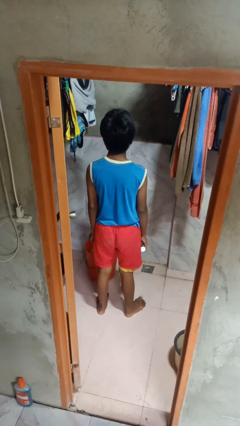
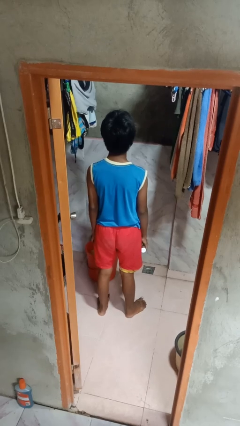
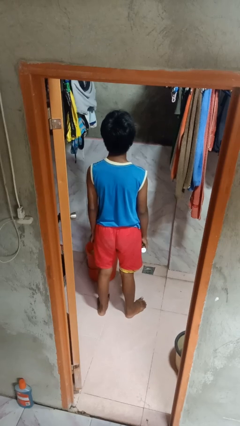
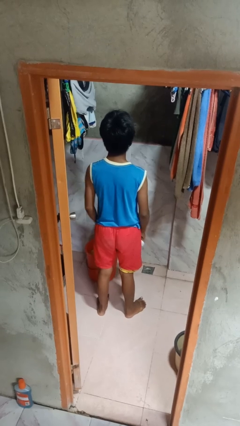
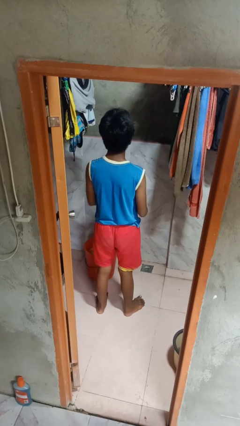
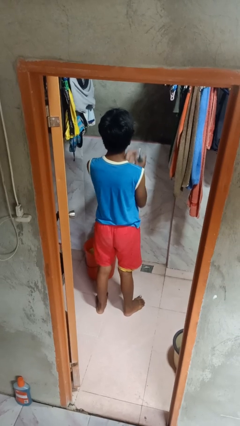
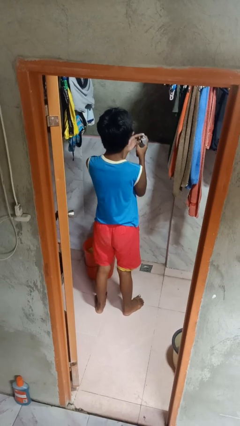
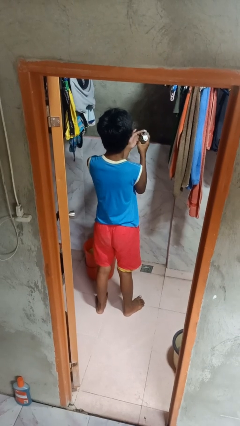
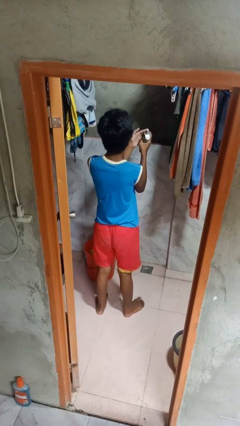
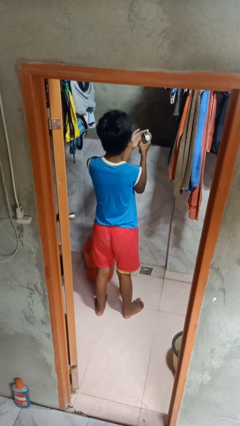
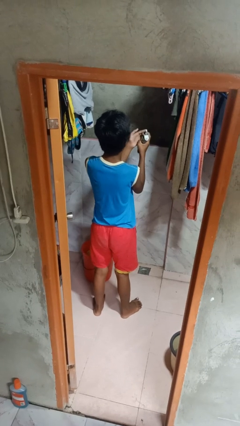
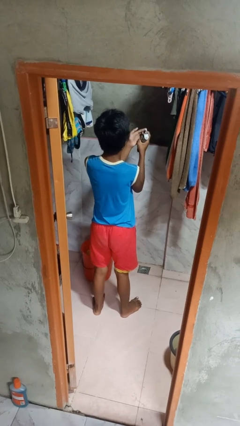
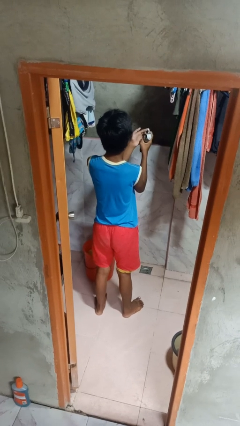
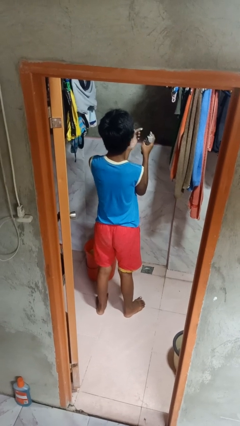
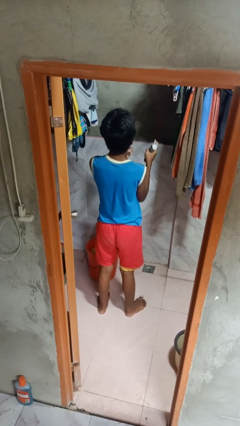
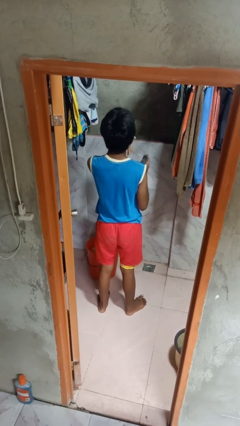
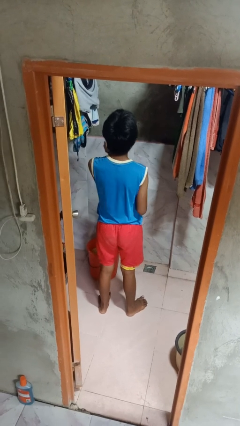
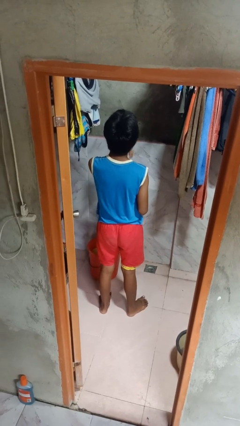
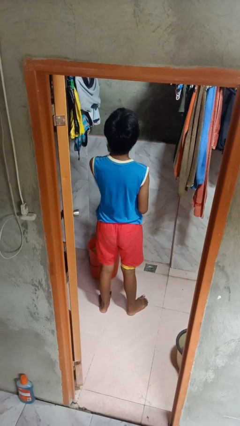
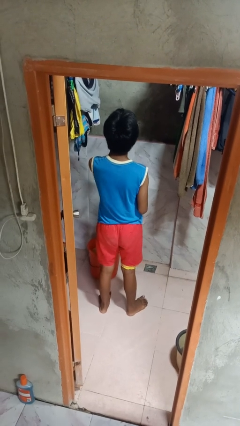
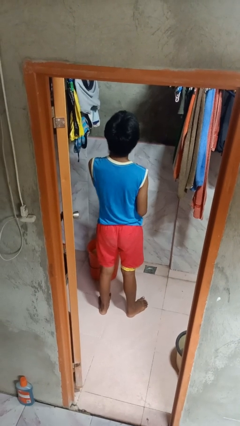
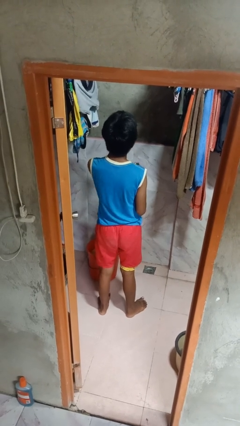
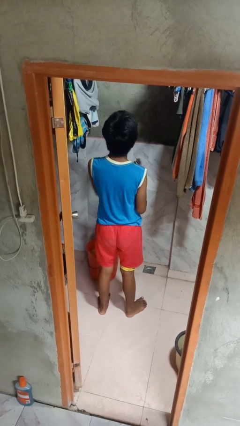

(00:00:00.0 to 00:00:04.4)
person applies shaving cream

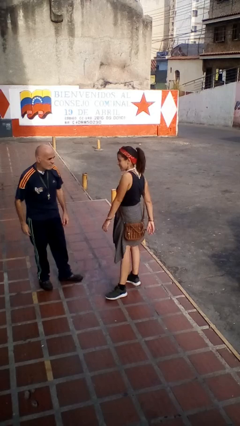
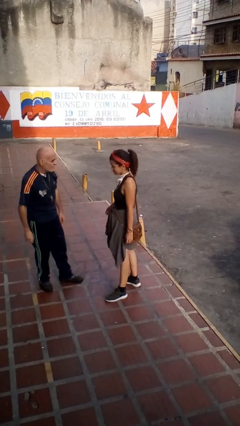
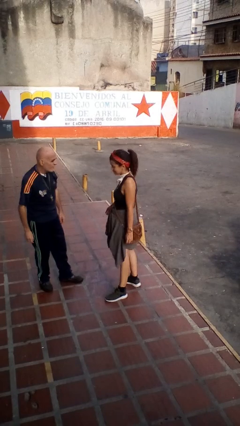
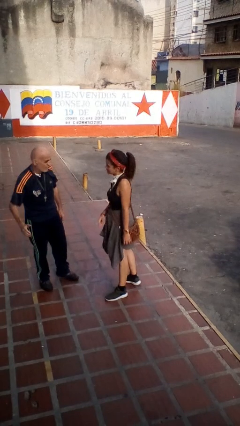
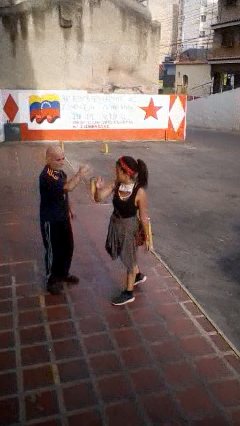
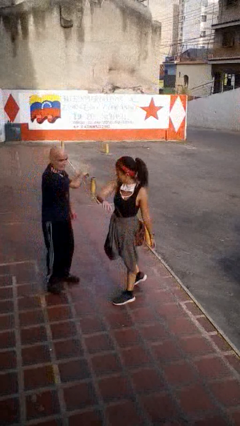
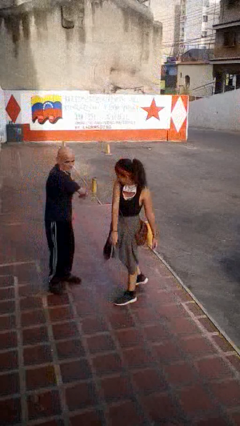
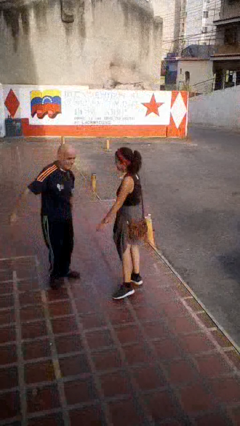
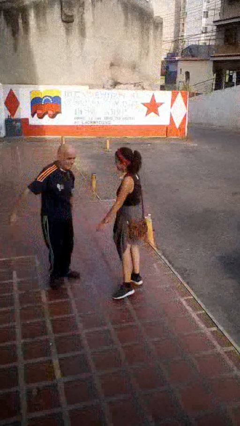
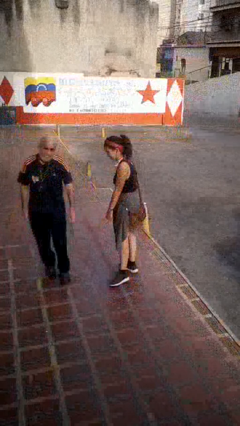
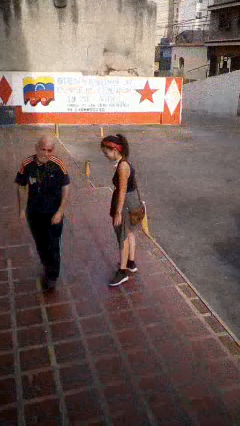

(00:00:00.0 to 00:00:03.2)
person highfives hand

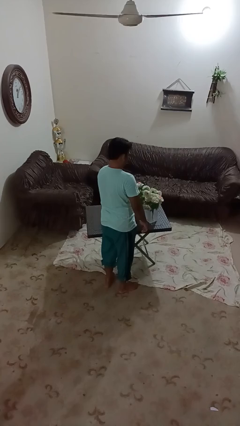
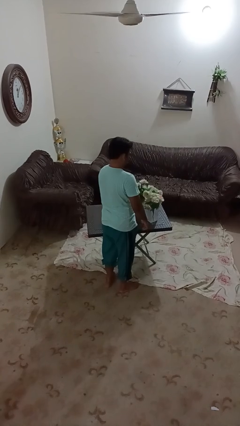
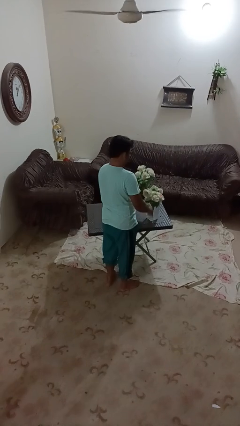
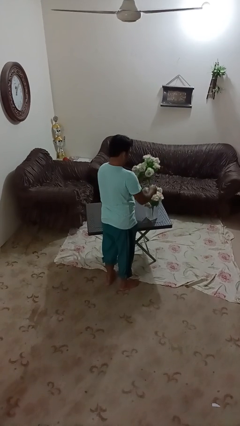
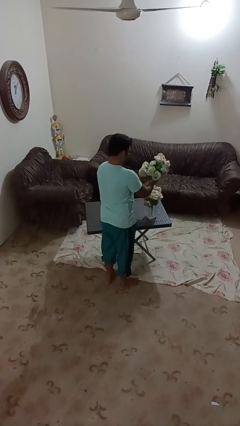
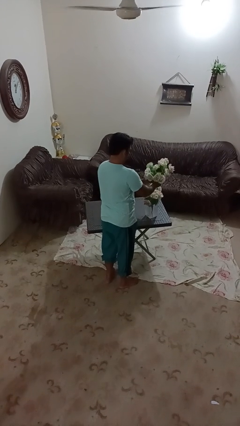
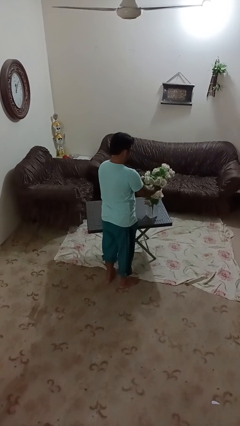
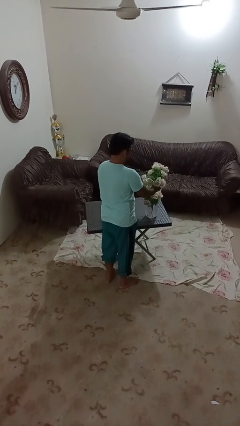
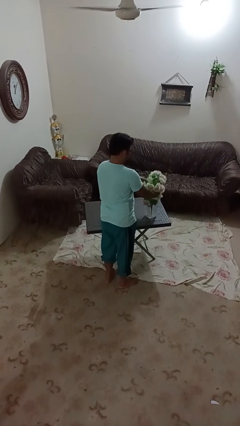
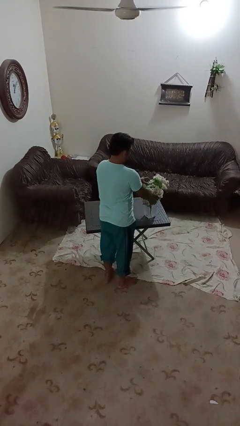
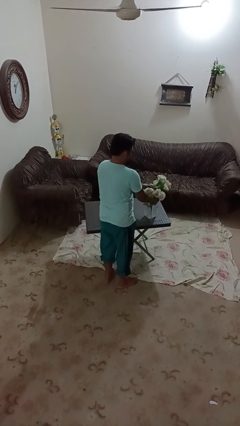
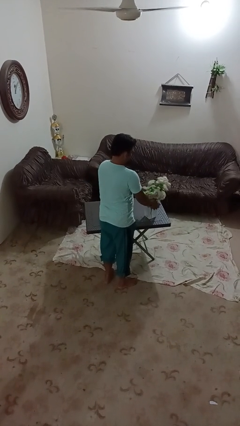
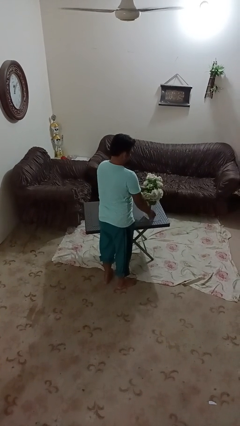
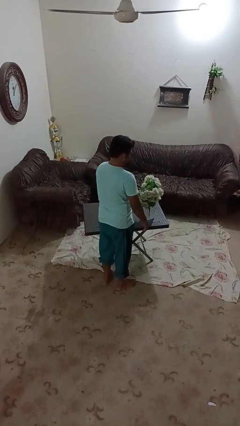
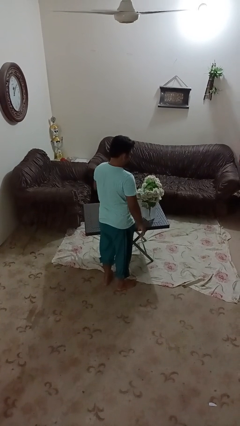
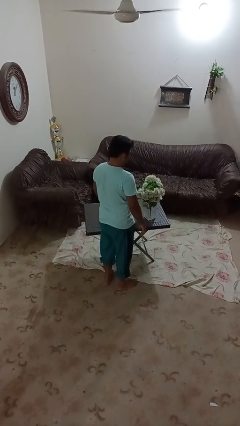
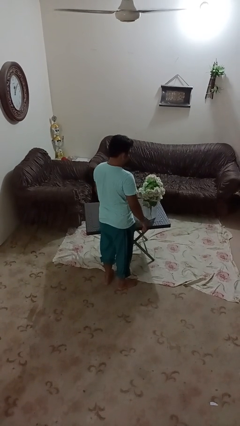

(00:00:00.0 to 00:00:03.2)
person arranges flowers in vase

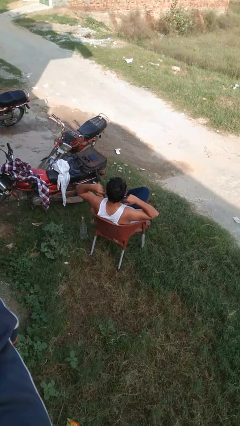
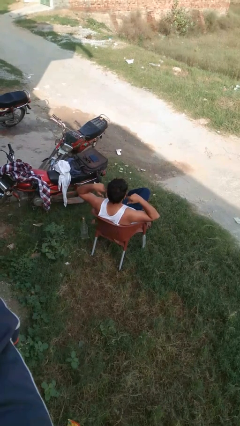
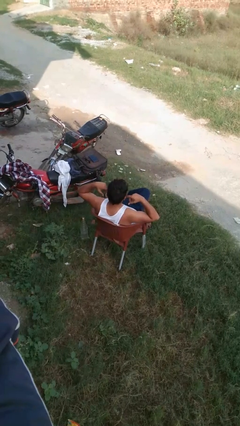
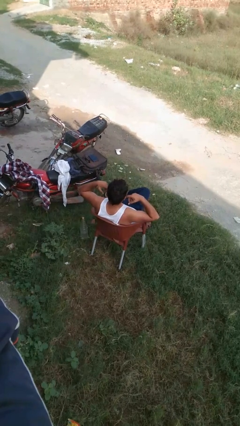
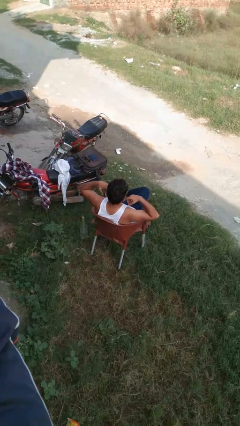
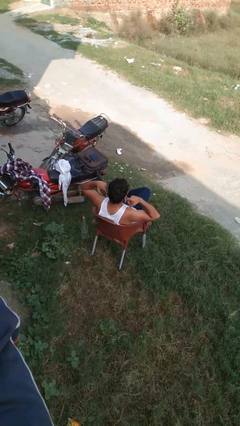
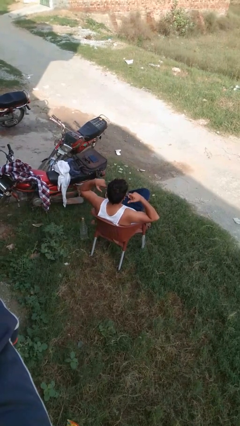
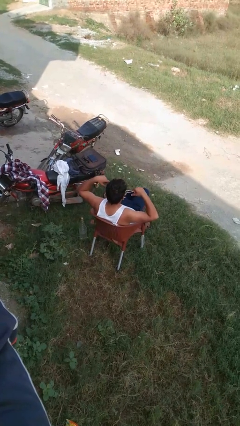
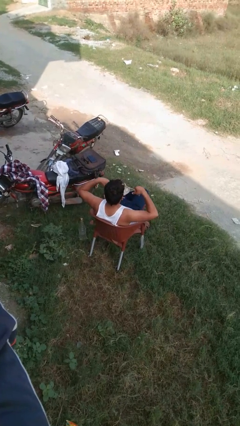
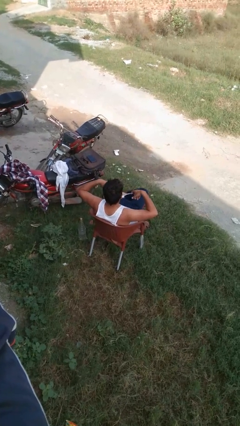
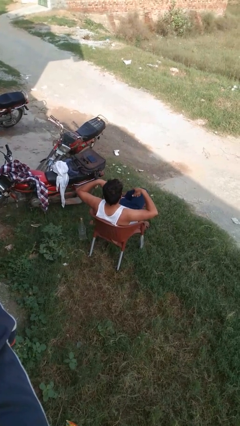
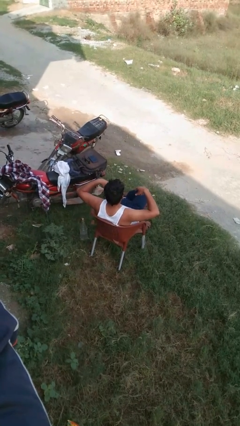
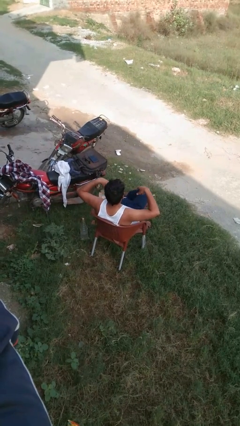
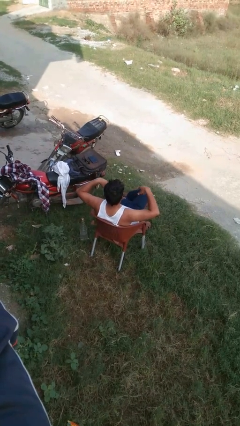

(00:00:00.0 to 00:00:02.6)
person takes off facemask

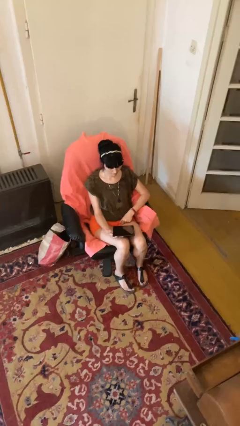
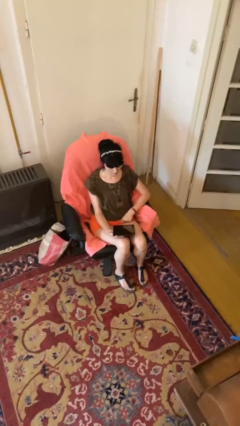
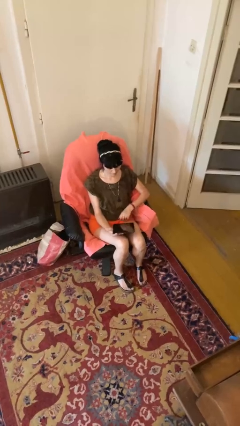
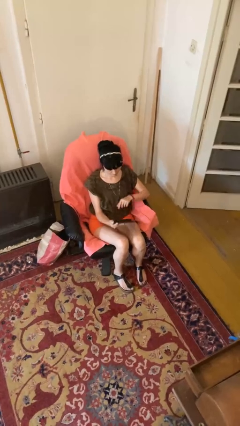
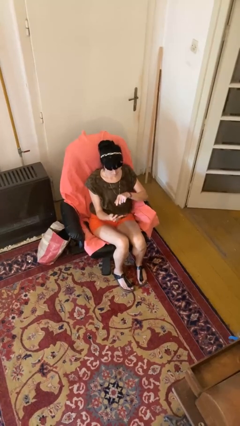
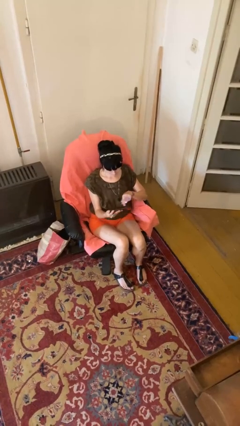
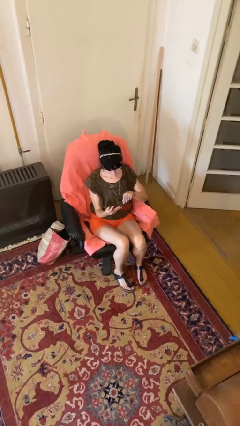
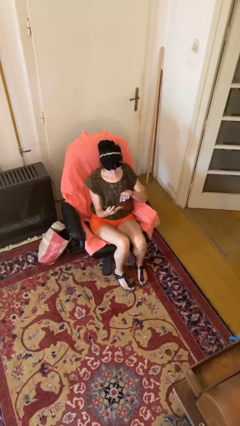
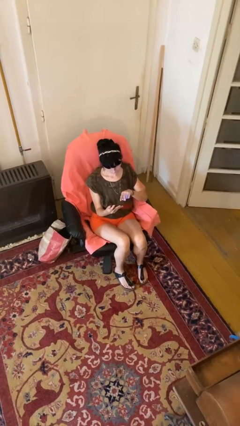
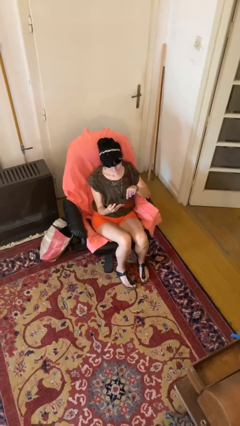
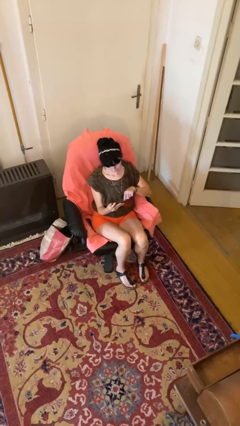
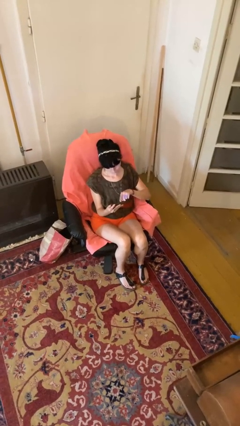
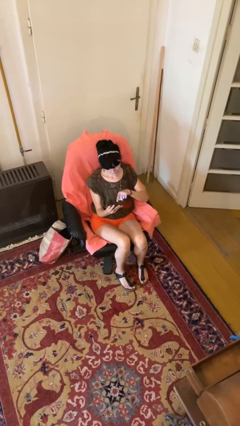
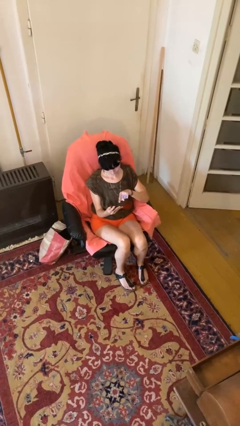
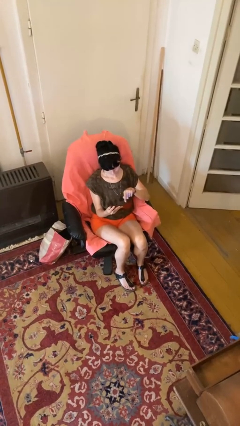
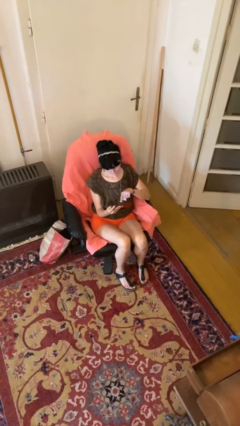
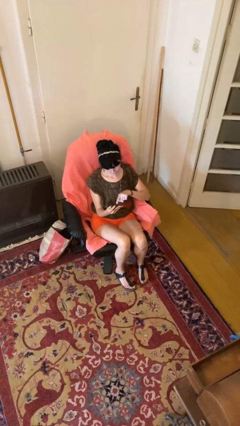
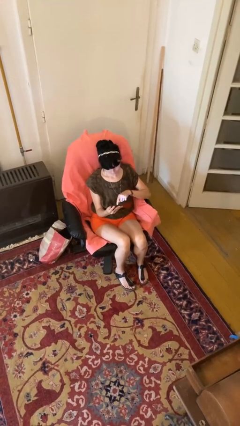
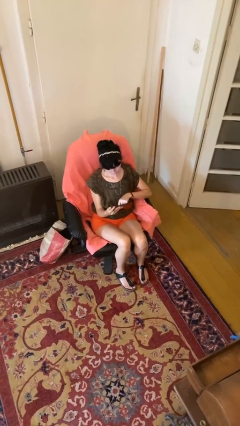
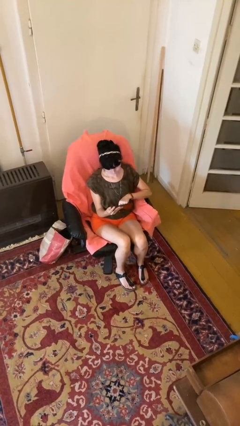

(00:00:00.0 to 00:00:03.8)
person interacts with tablet

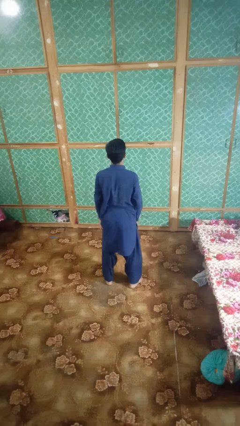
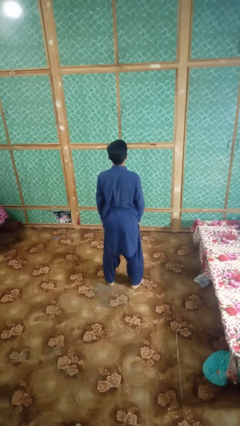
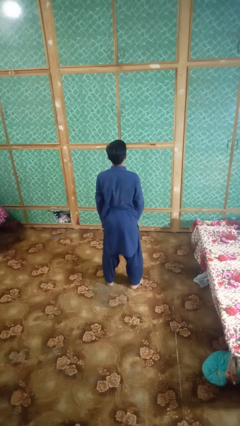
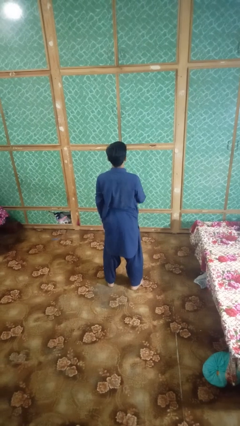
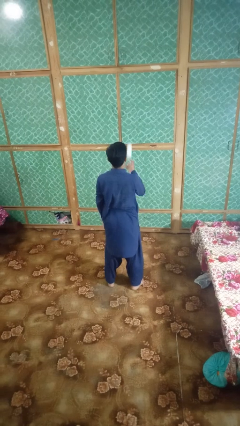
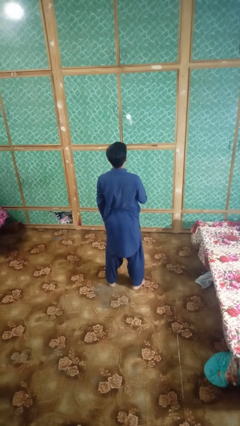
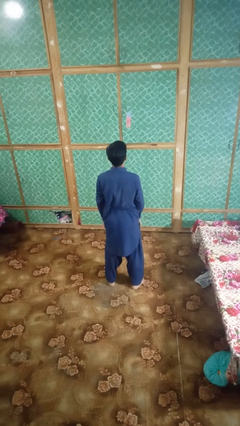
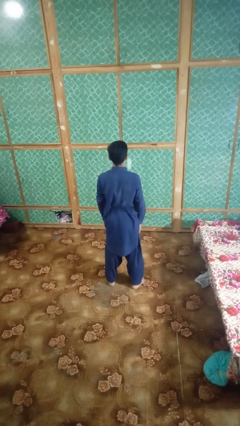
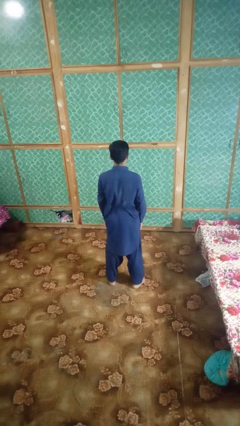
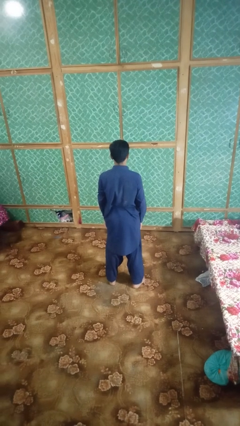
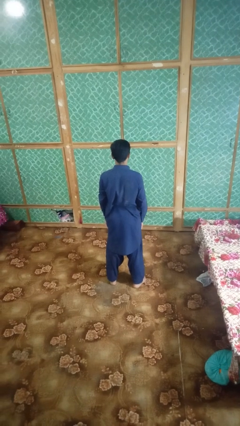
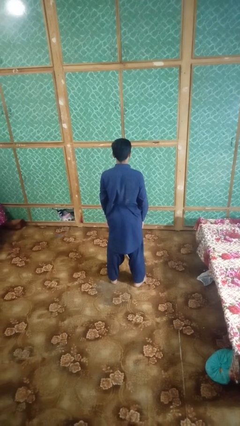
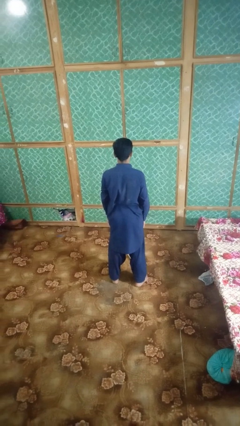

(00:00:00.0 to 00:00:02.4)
person throws object into air
